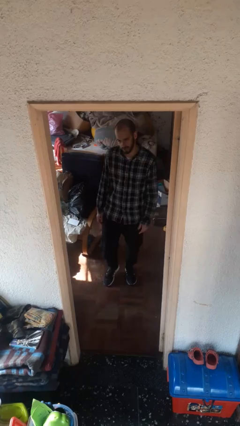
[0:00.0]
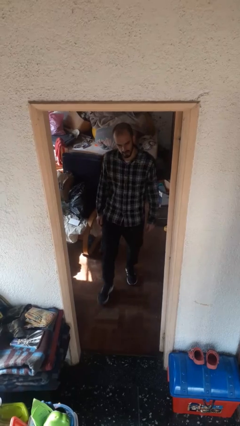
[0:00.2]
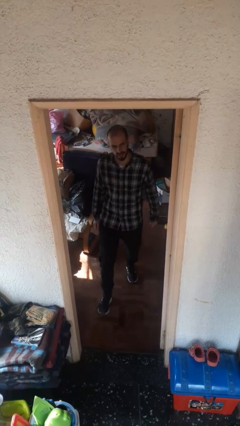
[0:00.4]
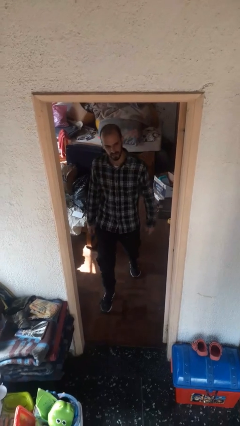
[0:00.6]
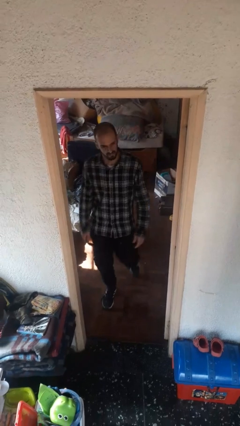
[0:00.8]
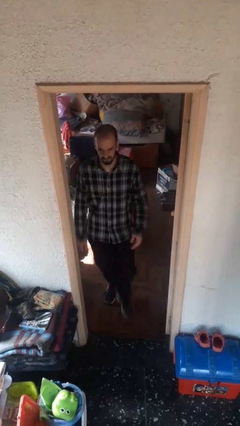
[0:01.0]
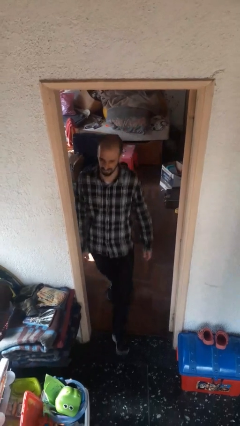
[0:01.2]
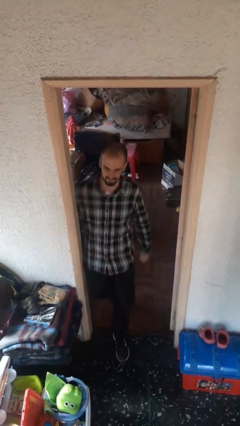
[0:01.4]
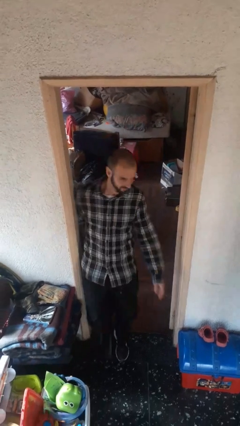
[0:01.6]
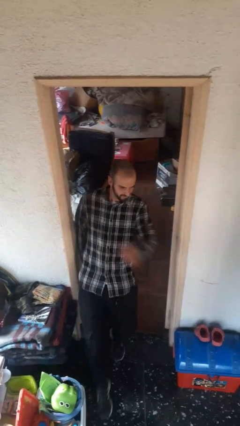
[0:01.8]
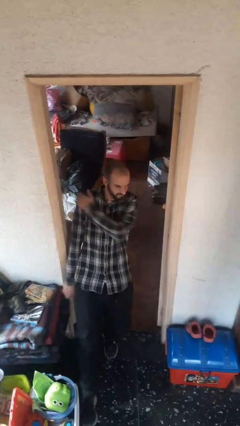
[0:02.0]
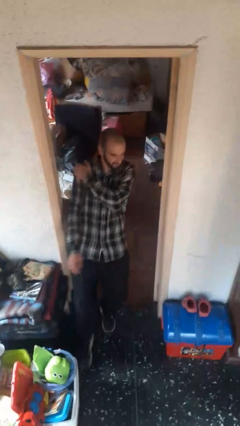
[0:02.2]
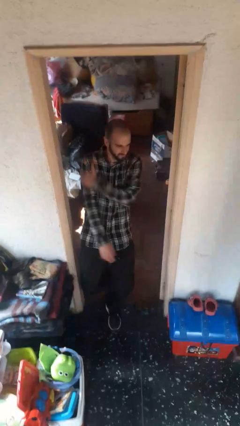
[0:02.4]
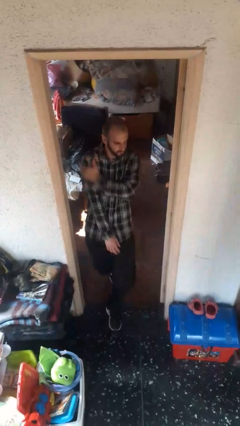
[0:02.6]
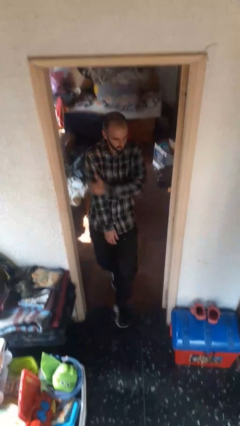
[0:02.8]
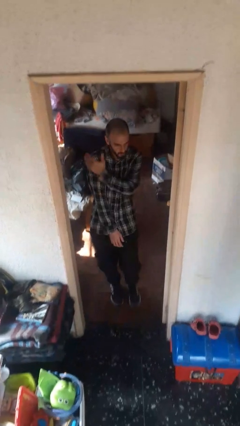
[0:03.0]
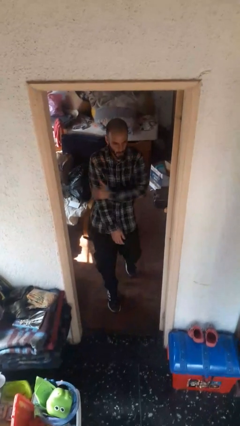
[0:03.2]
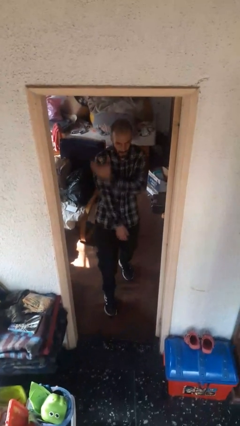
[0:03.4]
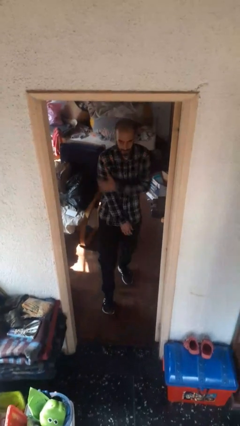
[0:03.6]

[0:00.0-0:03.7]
person bumps into wall

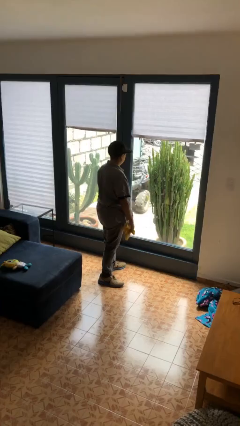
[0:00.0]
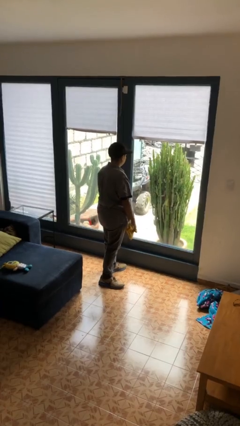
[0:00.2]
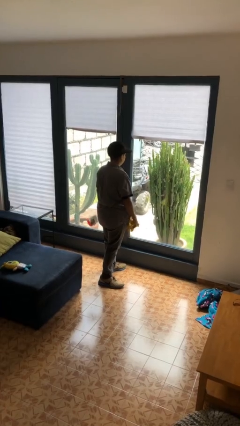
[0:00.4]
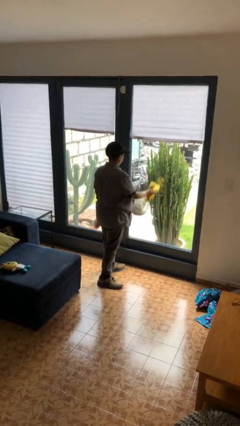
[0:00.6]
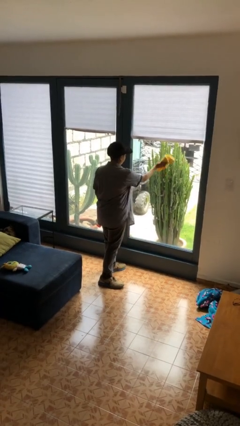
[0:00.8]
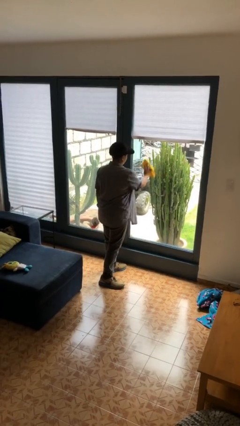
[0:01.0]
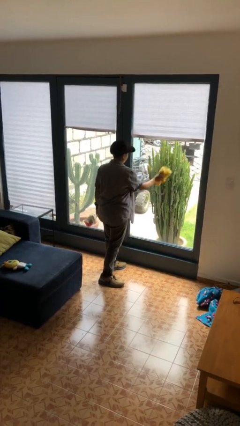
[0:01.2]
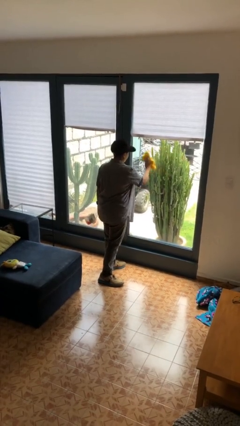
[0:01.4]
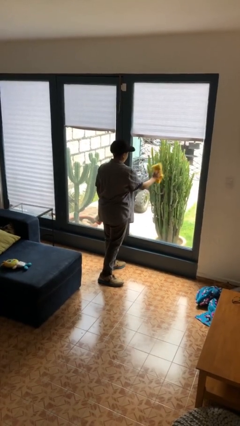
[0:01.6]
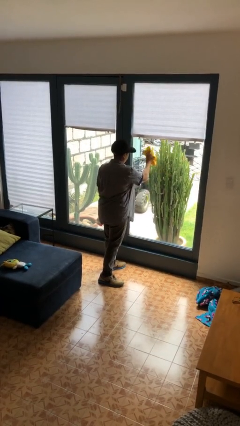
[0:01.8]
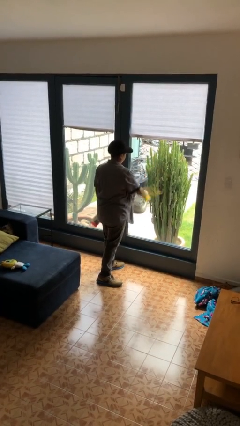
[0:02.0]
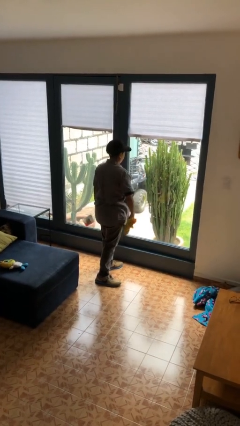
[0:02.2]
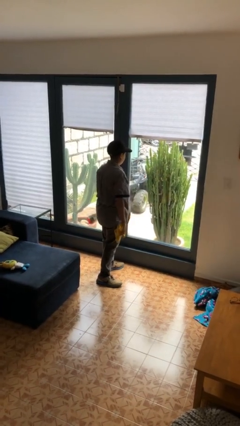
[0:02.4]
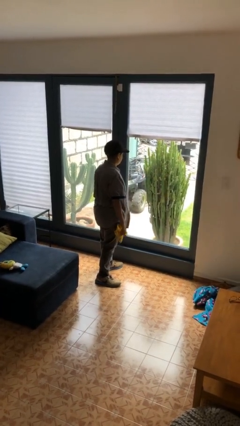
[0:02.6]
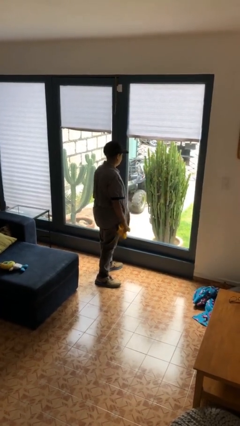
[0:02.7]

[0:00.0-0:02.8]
person washes window

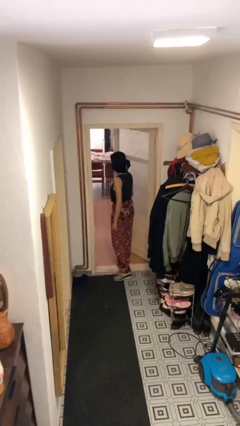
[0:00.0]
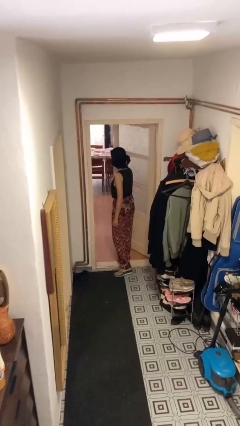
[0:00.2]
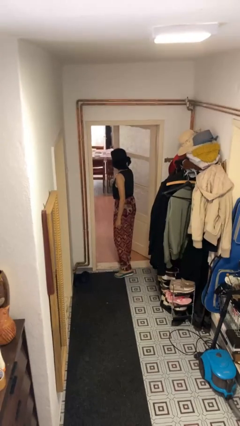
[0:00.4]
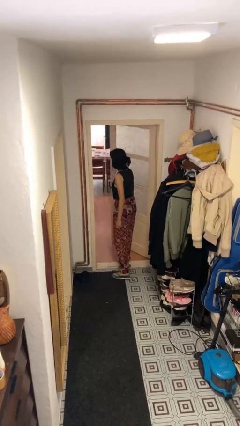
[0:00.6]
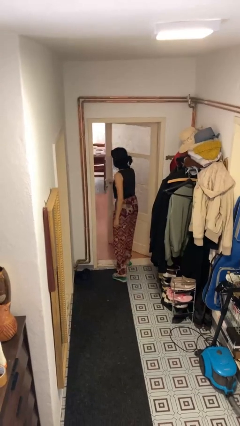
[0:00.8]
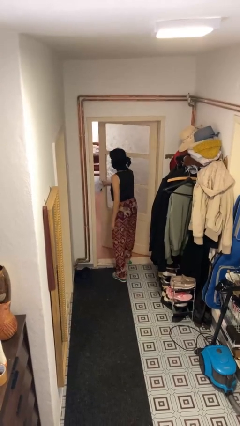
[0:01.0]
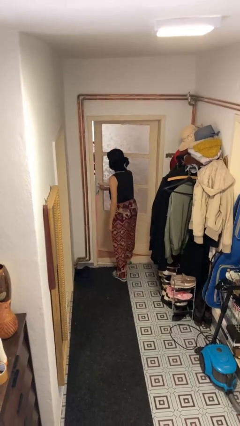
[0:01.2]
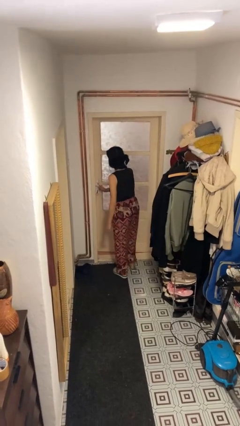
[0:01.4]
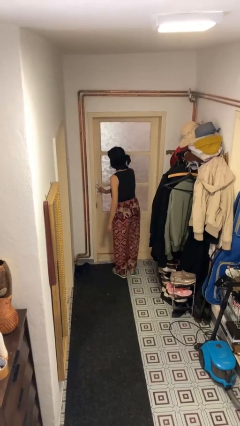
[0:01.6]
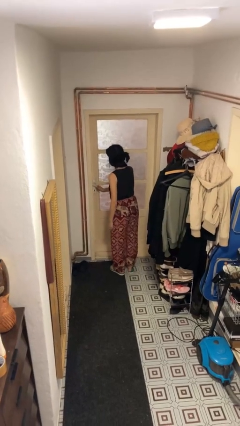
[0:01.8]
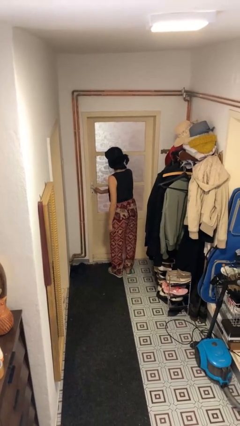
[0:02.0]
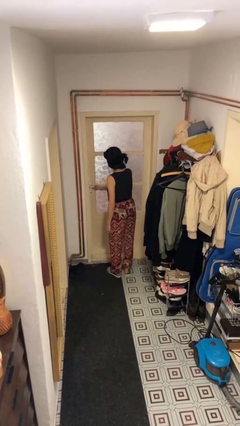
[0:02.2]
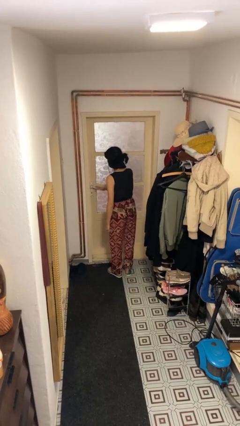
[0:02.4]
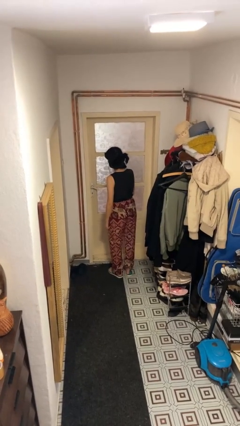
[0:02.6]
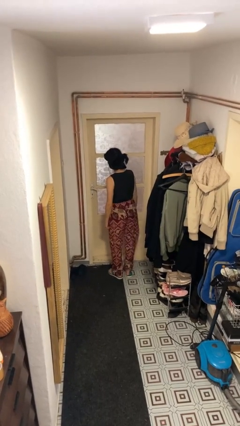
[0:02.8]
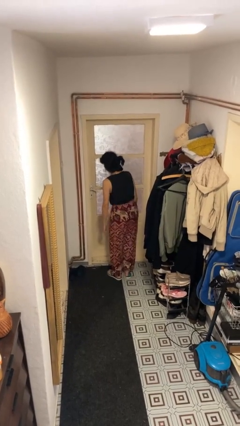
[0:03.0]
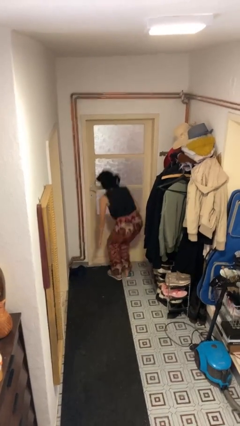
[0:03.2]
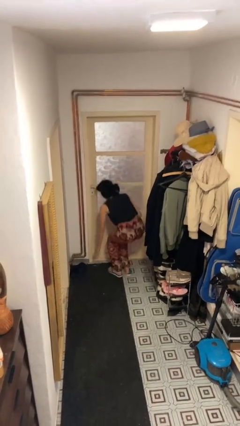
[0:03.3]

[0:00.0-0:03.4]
person closes facility door

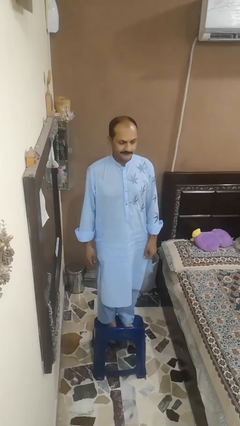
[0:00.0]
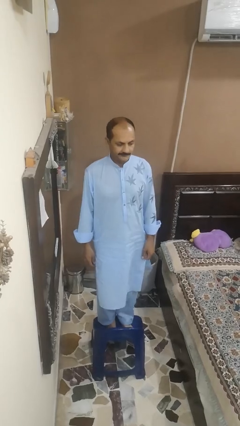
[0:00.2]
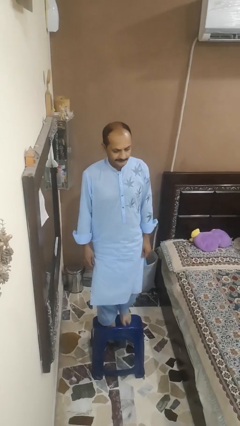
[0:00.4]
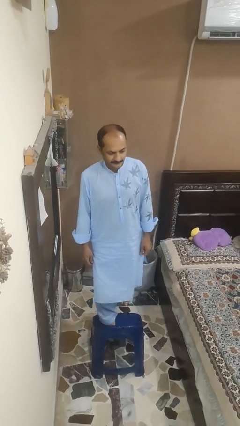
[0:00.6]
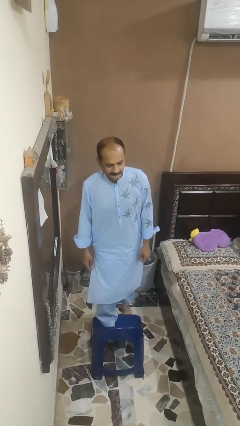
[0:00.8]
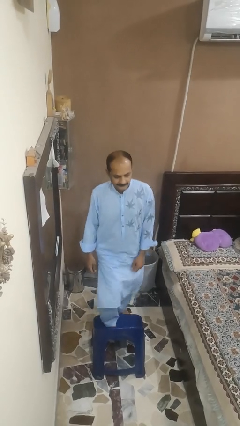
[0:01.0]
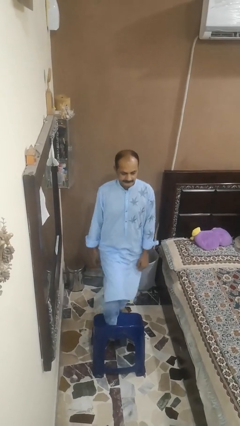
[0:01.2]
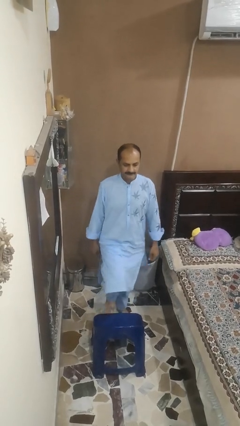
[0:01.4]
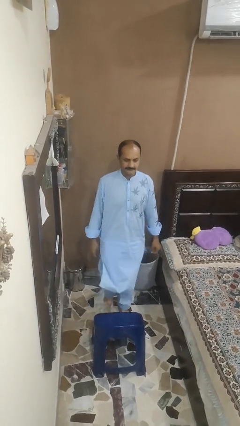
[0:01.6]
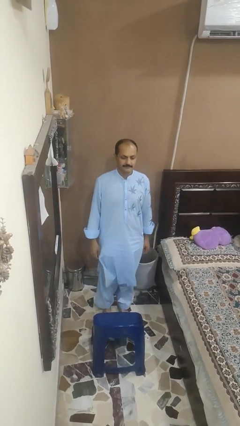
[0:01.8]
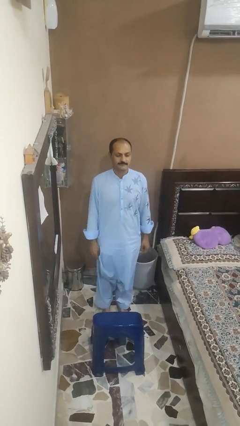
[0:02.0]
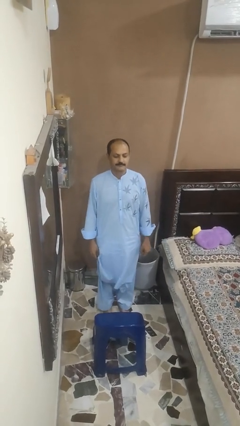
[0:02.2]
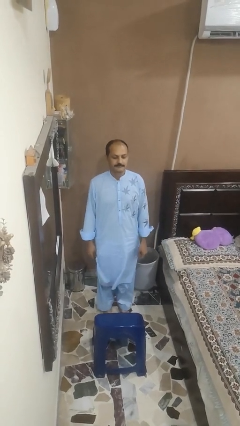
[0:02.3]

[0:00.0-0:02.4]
person climbs off chair

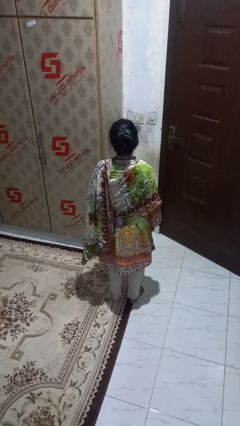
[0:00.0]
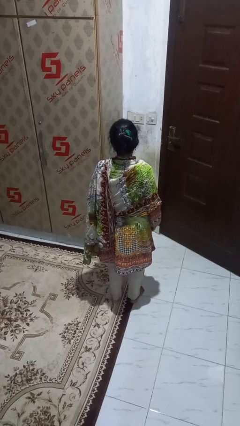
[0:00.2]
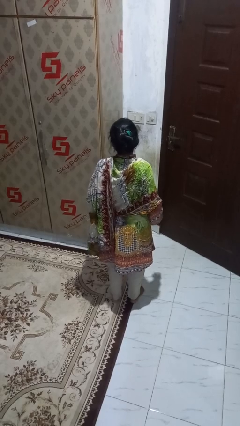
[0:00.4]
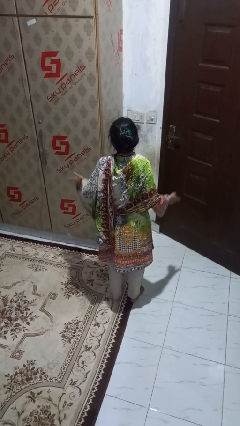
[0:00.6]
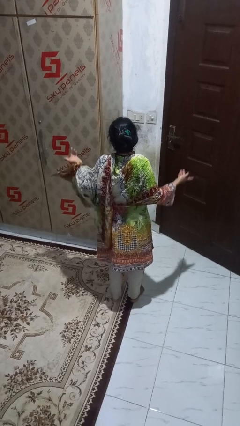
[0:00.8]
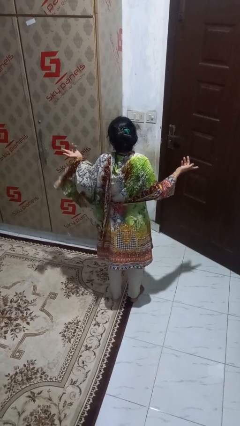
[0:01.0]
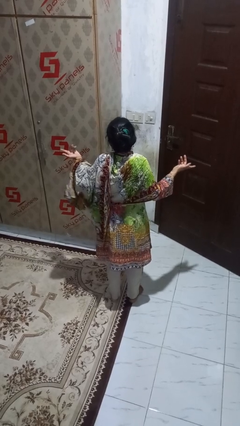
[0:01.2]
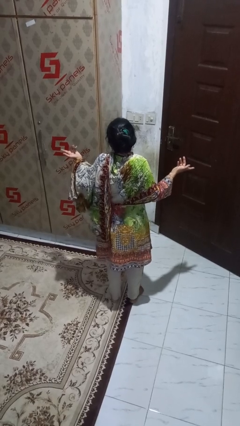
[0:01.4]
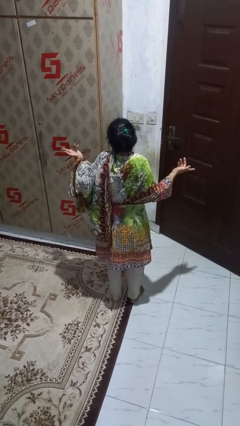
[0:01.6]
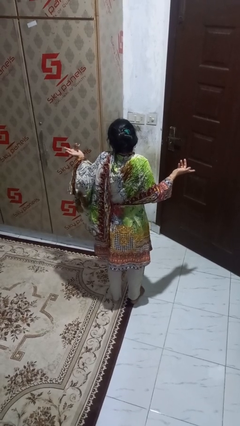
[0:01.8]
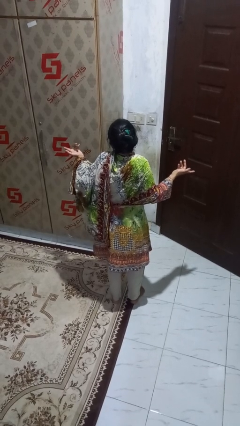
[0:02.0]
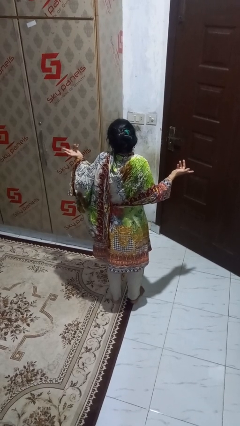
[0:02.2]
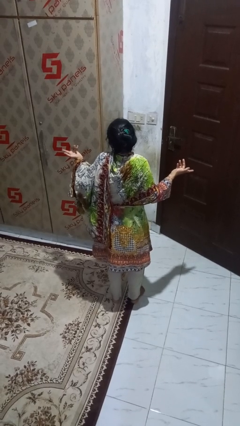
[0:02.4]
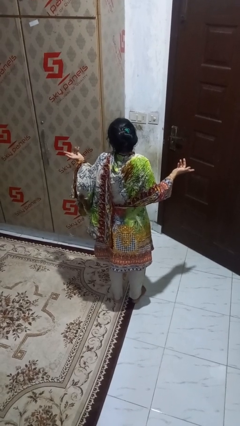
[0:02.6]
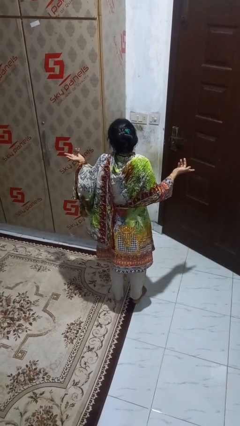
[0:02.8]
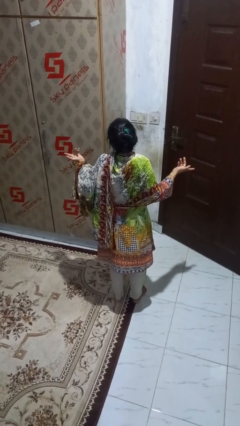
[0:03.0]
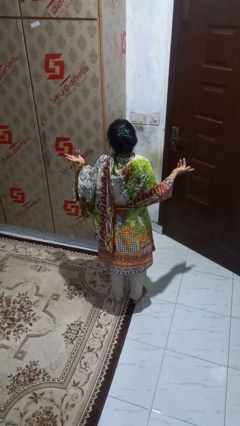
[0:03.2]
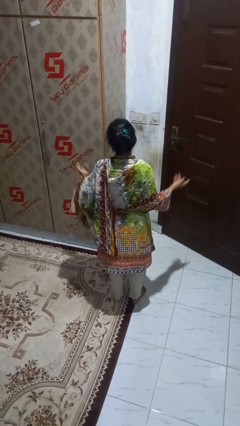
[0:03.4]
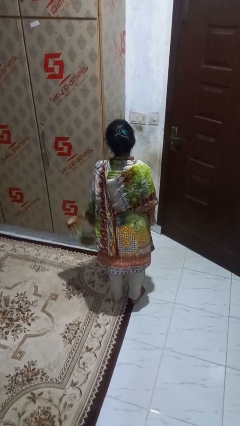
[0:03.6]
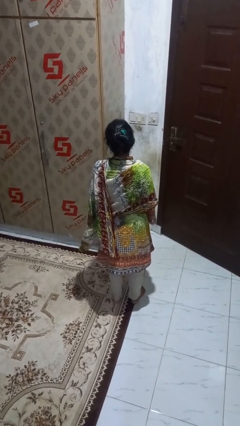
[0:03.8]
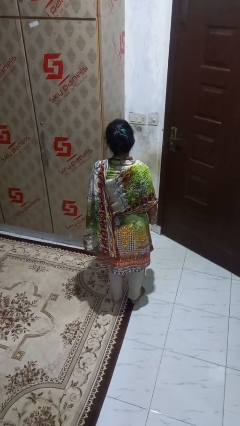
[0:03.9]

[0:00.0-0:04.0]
person shrugs

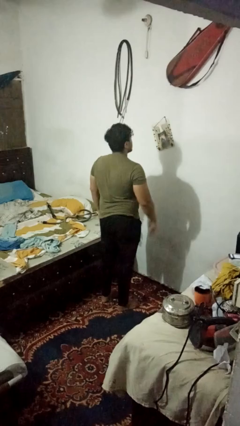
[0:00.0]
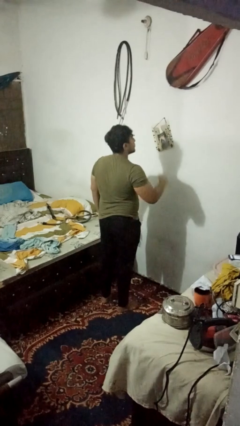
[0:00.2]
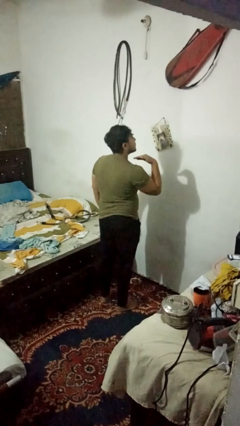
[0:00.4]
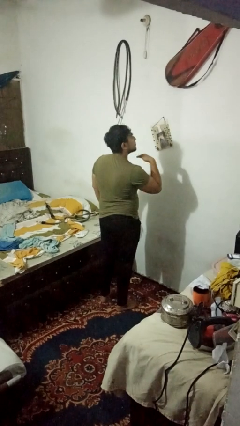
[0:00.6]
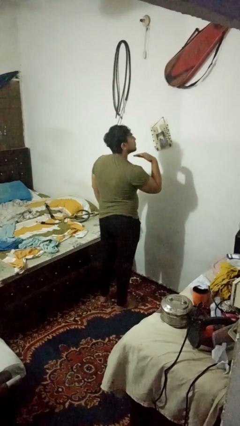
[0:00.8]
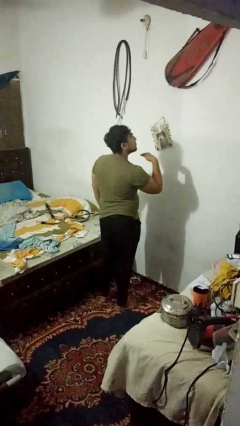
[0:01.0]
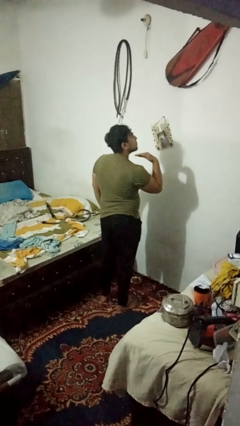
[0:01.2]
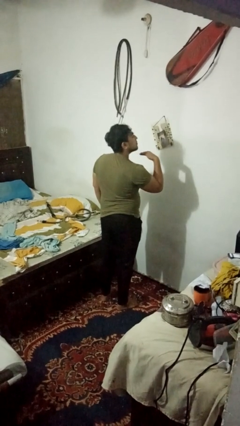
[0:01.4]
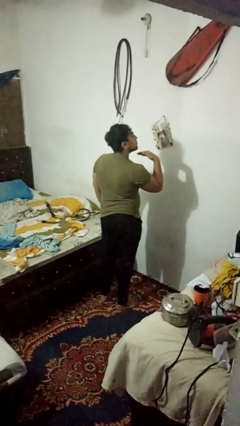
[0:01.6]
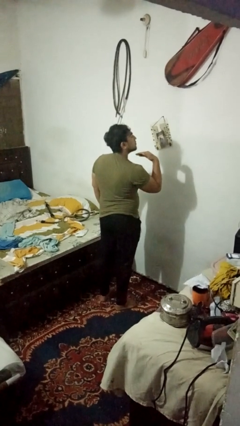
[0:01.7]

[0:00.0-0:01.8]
person gestures cut
